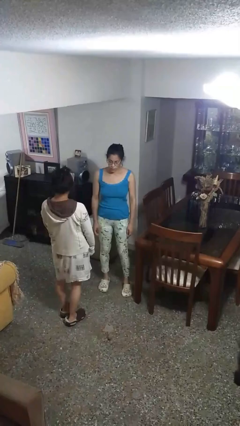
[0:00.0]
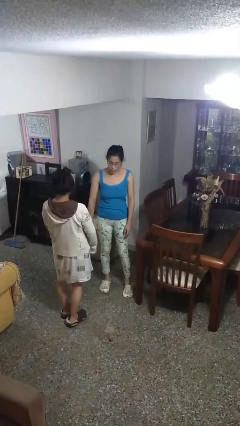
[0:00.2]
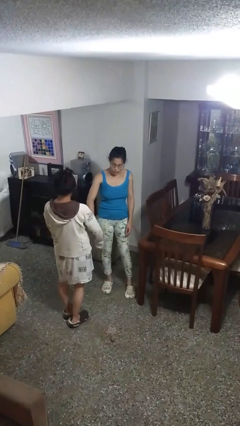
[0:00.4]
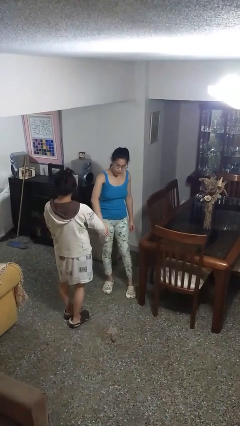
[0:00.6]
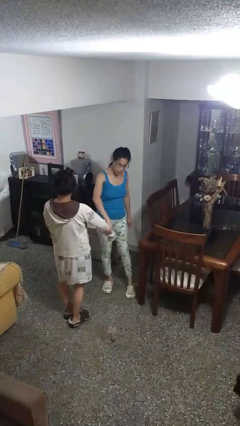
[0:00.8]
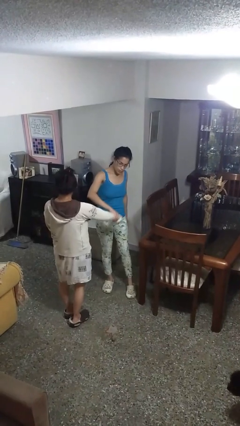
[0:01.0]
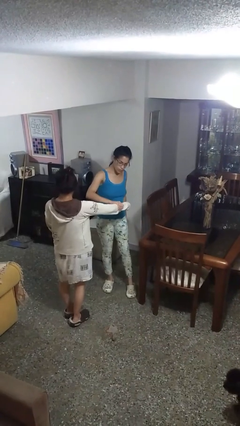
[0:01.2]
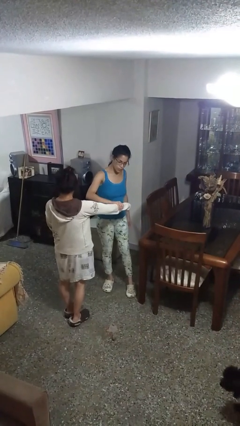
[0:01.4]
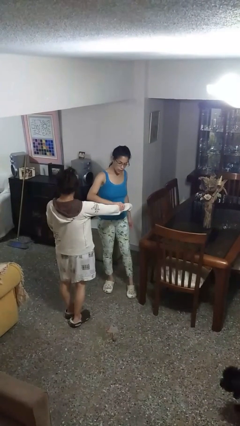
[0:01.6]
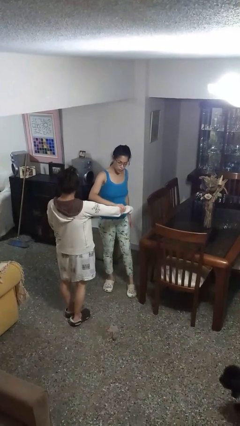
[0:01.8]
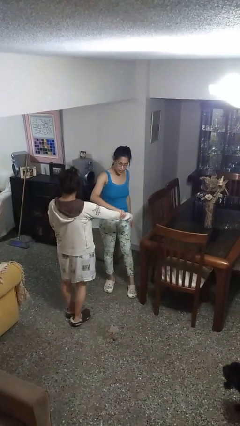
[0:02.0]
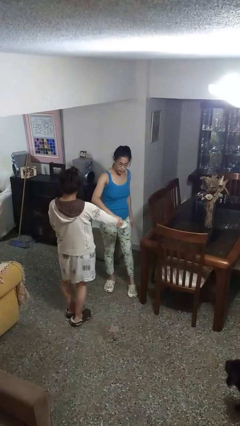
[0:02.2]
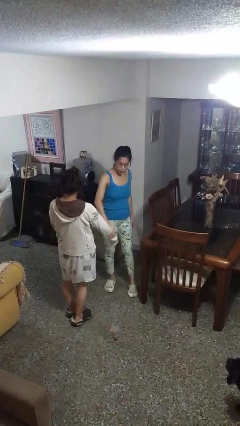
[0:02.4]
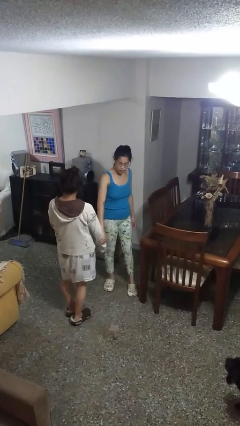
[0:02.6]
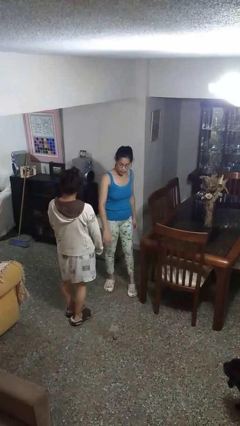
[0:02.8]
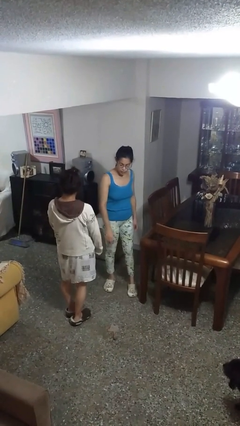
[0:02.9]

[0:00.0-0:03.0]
person grabs person by forearm

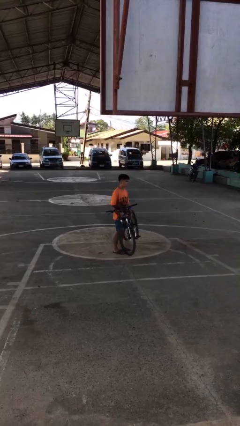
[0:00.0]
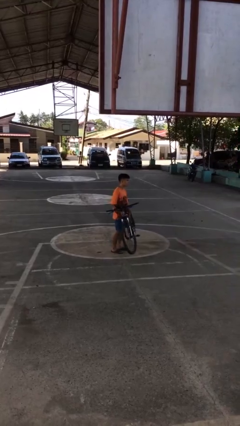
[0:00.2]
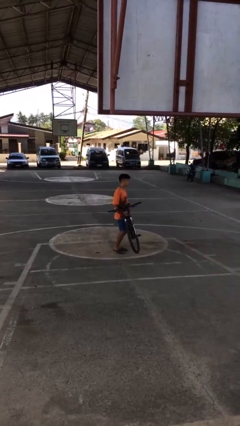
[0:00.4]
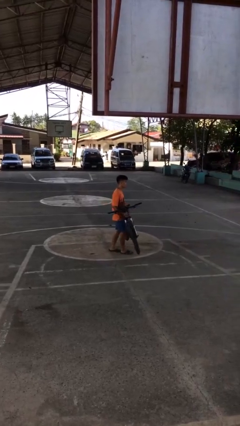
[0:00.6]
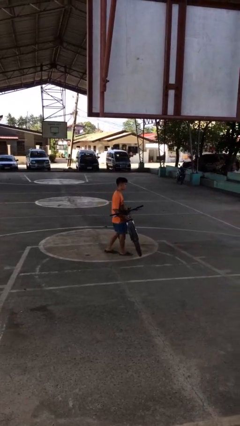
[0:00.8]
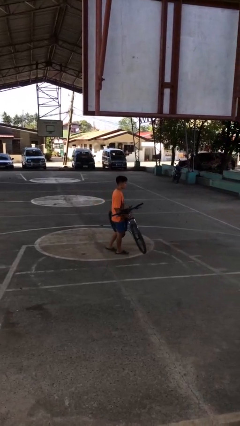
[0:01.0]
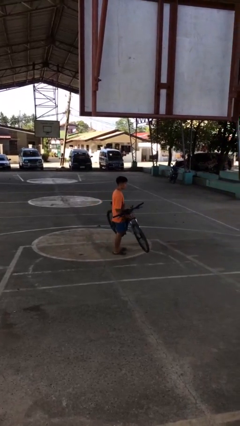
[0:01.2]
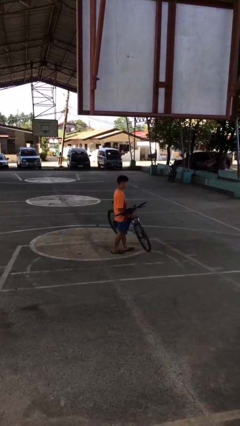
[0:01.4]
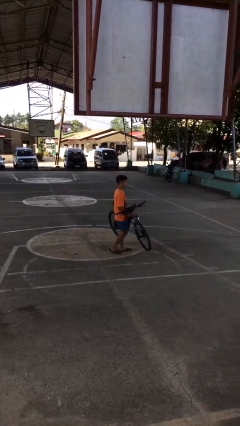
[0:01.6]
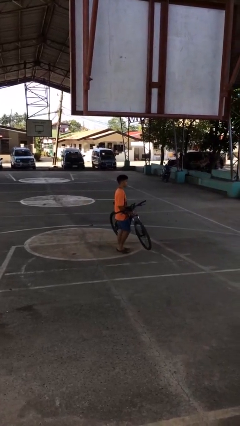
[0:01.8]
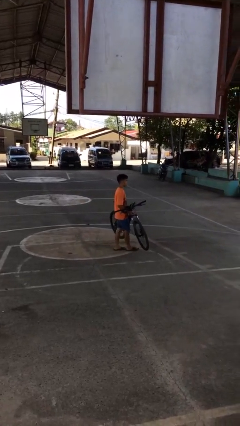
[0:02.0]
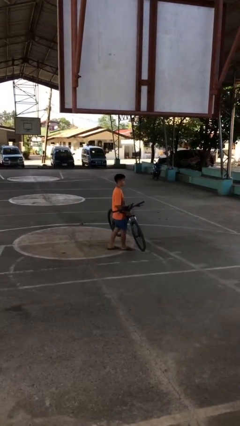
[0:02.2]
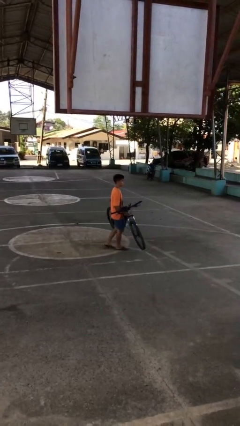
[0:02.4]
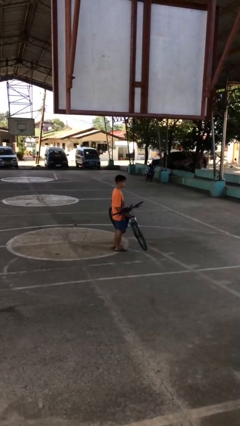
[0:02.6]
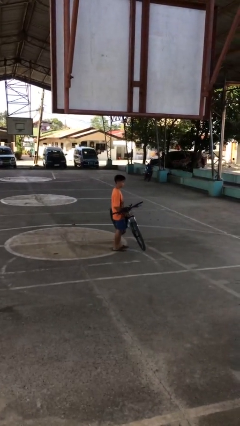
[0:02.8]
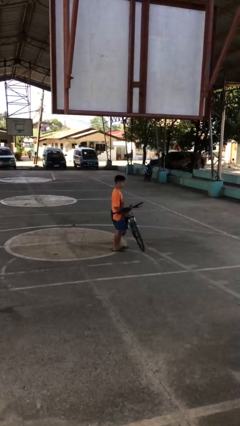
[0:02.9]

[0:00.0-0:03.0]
person carries bicycle

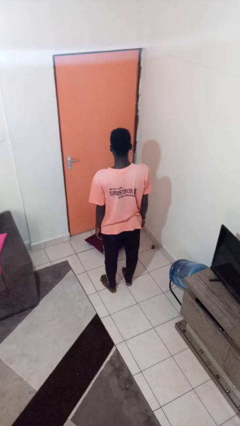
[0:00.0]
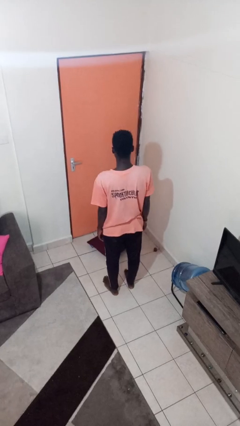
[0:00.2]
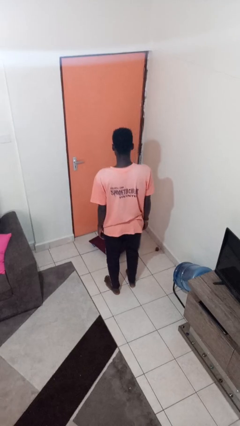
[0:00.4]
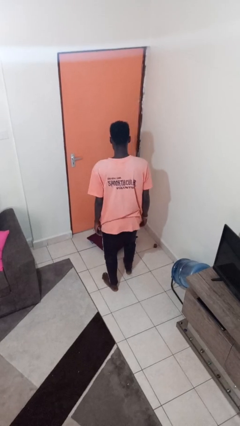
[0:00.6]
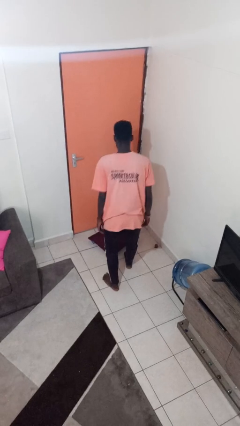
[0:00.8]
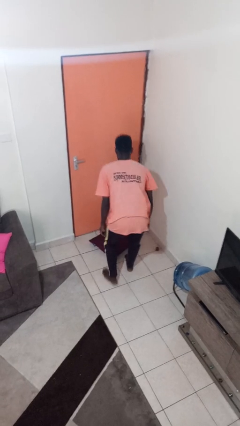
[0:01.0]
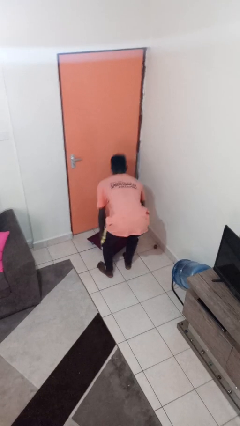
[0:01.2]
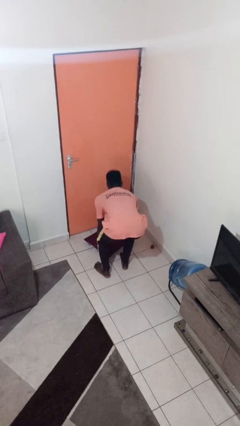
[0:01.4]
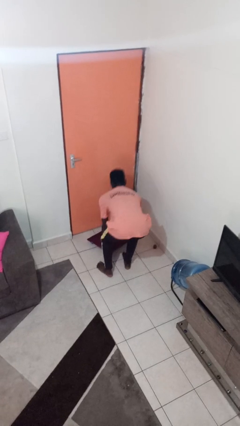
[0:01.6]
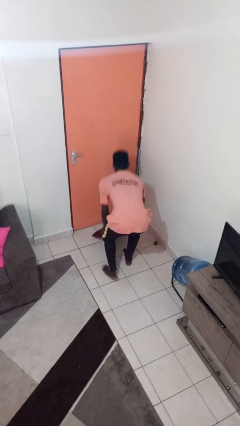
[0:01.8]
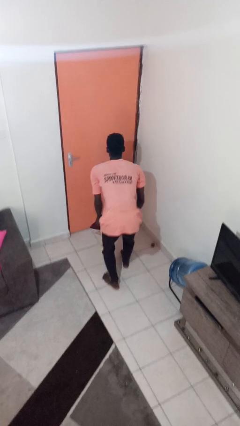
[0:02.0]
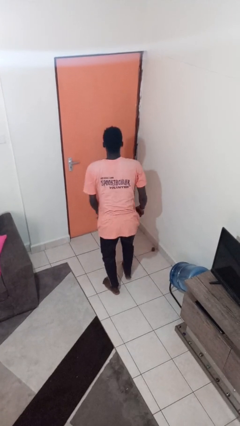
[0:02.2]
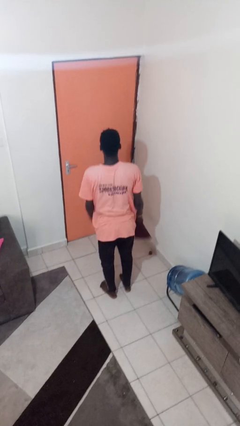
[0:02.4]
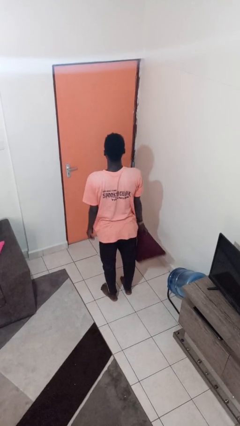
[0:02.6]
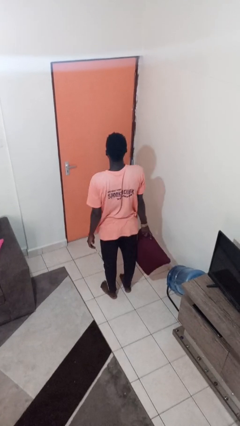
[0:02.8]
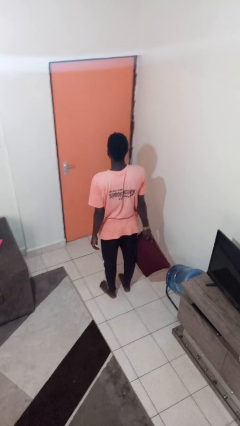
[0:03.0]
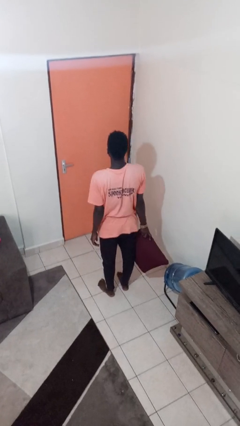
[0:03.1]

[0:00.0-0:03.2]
person picks up object from floor

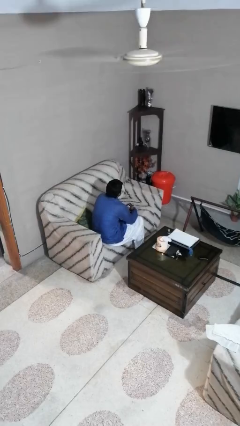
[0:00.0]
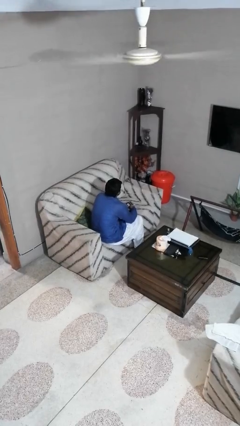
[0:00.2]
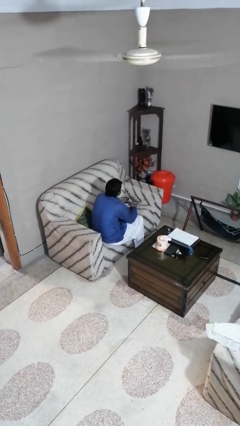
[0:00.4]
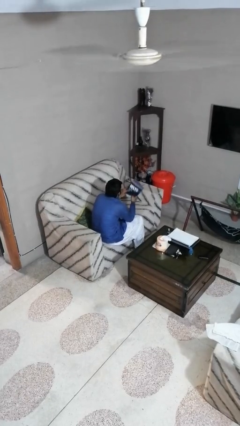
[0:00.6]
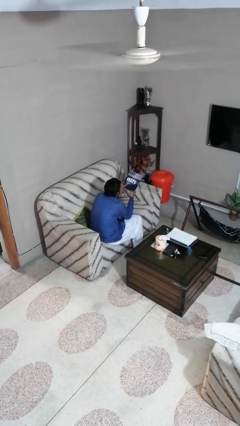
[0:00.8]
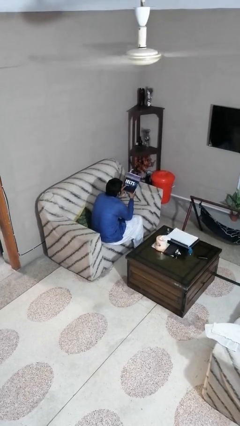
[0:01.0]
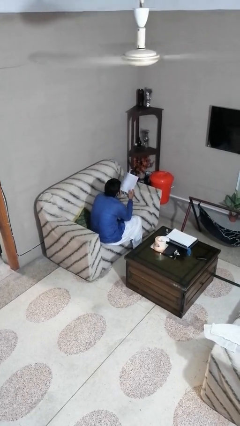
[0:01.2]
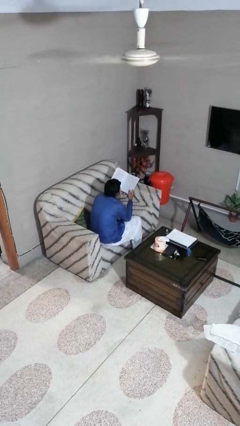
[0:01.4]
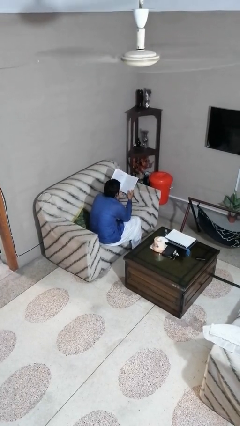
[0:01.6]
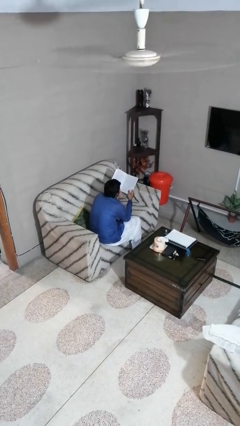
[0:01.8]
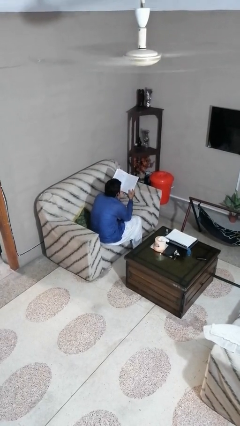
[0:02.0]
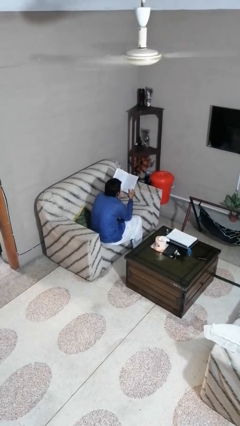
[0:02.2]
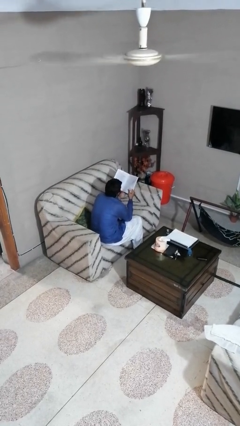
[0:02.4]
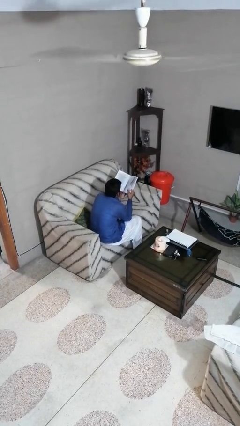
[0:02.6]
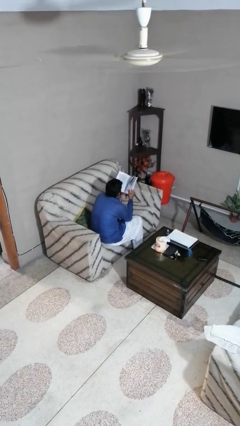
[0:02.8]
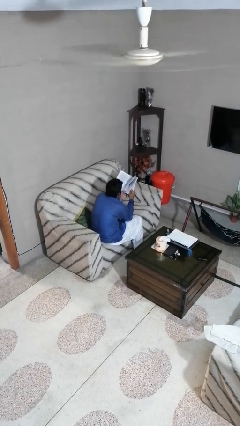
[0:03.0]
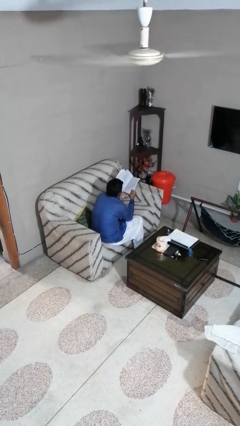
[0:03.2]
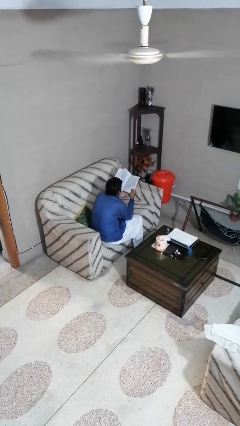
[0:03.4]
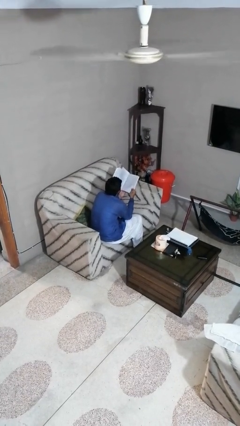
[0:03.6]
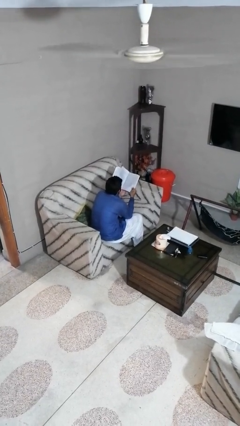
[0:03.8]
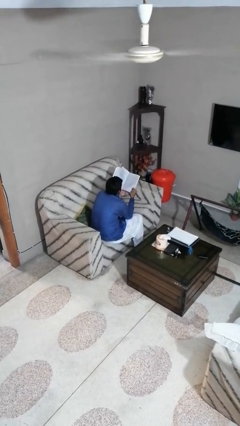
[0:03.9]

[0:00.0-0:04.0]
person reads book

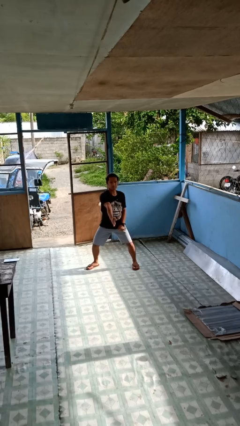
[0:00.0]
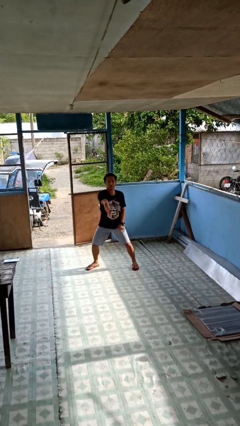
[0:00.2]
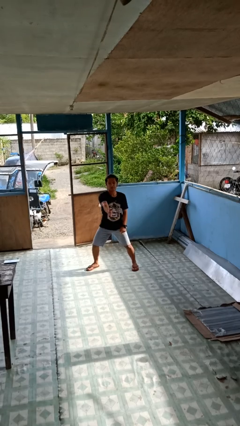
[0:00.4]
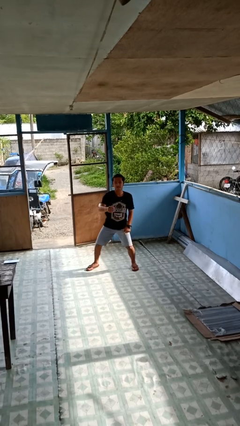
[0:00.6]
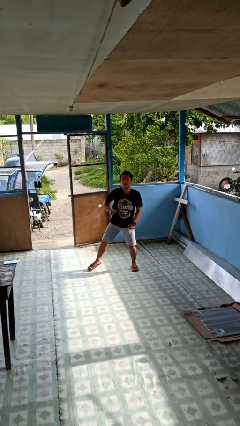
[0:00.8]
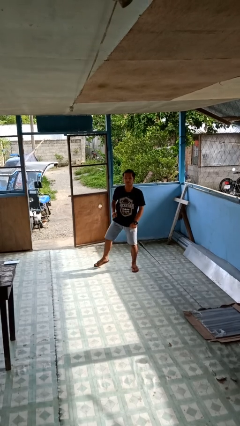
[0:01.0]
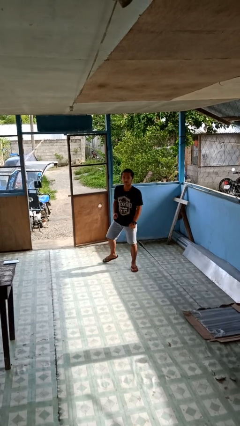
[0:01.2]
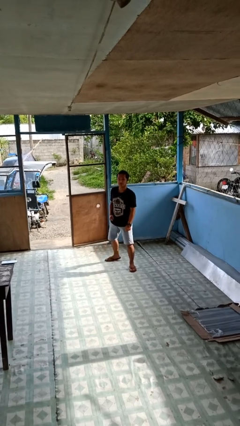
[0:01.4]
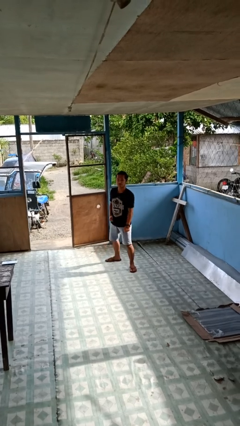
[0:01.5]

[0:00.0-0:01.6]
person karate chop

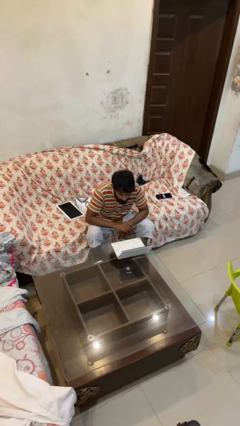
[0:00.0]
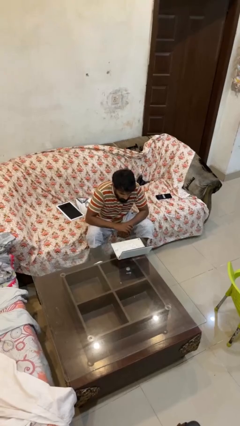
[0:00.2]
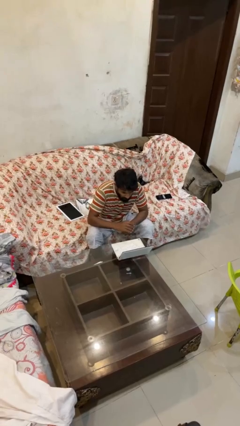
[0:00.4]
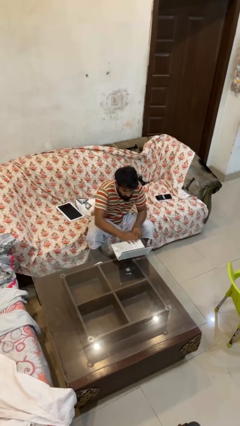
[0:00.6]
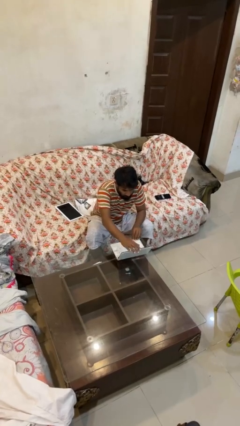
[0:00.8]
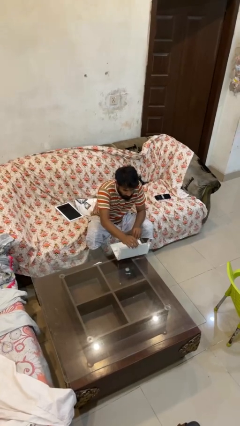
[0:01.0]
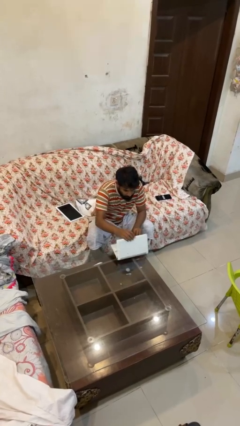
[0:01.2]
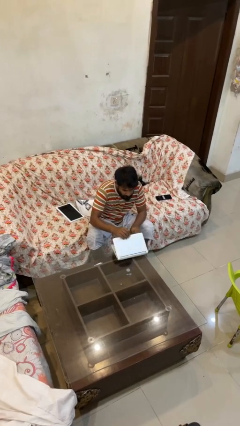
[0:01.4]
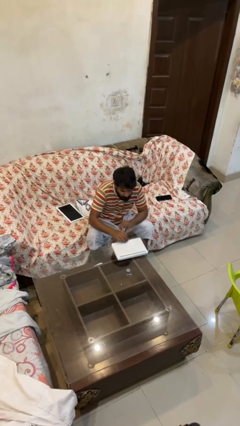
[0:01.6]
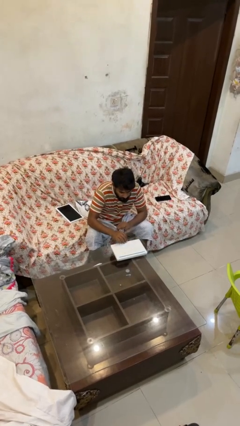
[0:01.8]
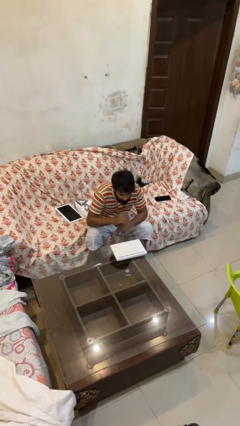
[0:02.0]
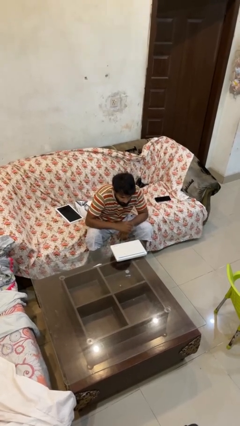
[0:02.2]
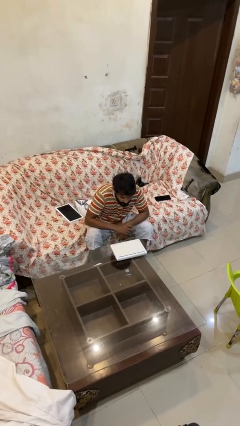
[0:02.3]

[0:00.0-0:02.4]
person closes laptop

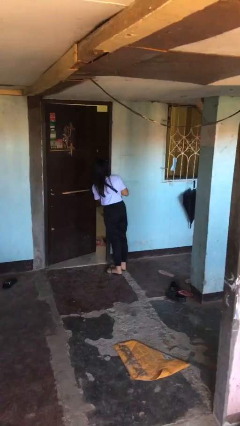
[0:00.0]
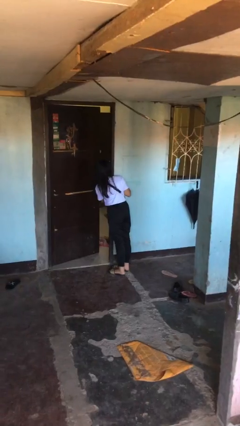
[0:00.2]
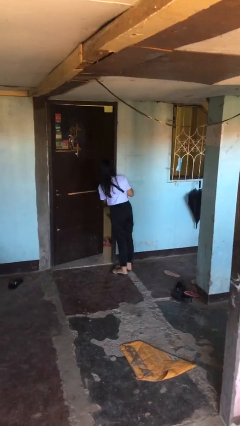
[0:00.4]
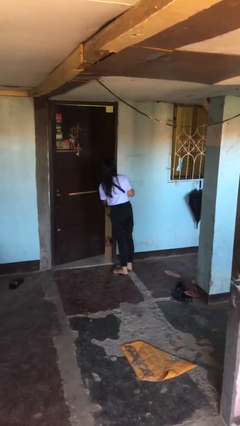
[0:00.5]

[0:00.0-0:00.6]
person opens facility door
